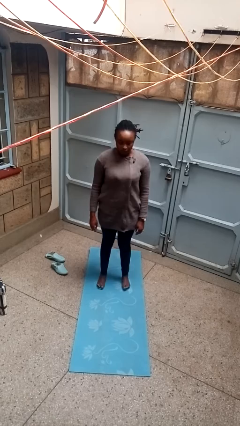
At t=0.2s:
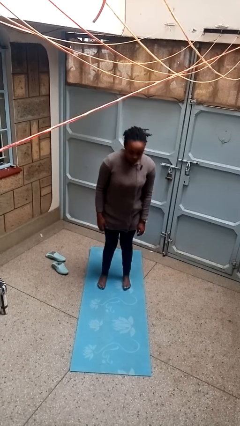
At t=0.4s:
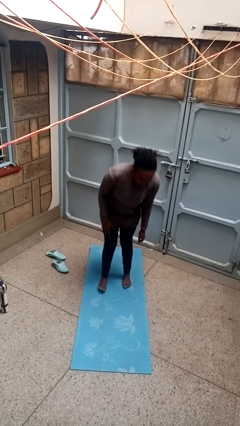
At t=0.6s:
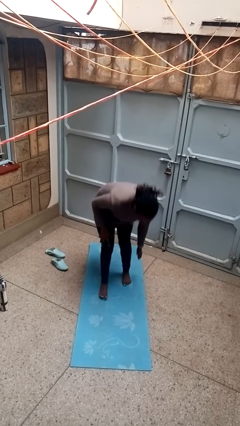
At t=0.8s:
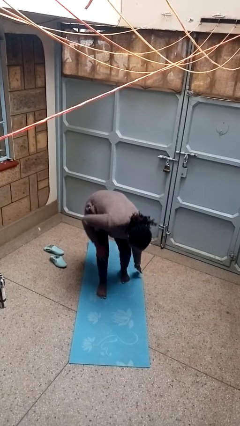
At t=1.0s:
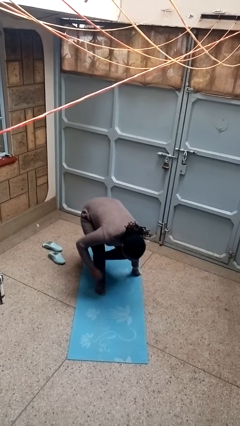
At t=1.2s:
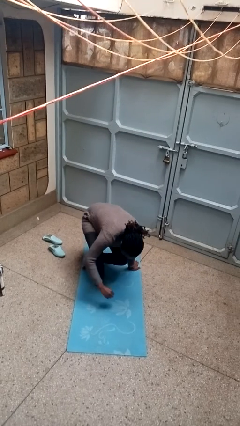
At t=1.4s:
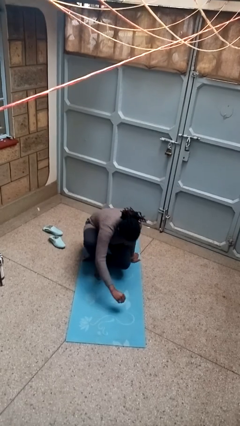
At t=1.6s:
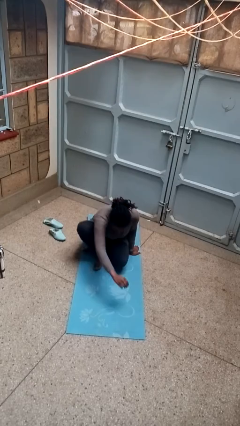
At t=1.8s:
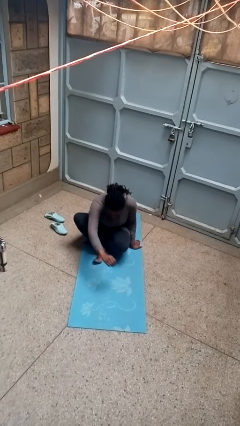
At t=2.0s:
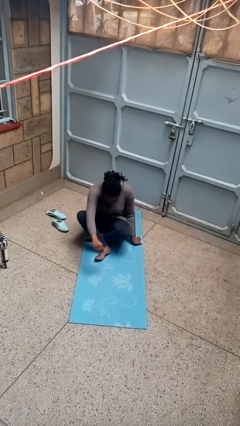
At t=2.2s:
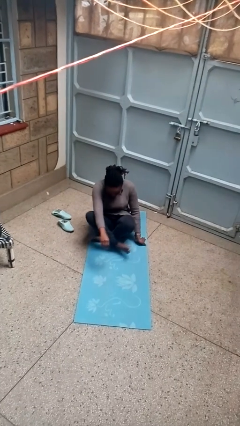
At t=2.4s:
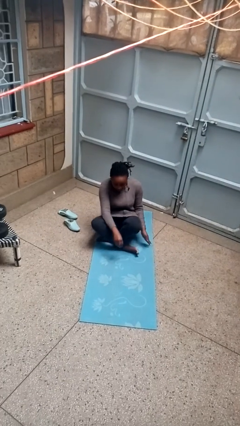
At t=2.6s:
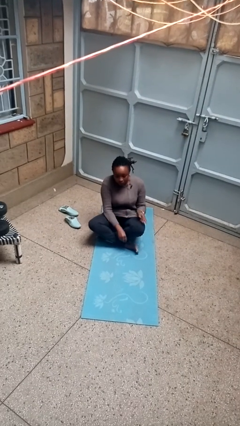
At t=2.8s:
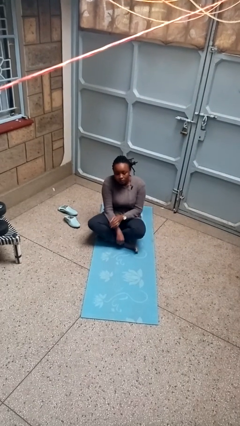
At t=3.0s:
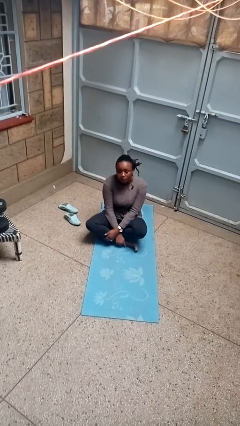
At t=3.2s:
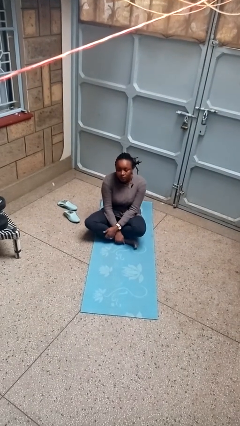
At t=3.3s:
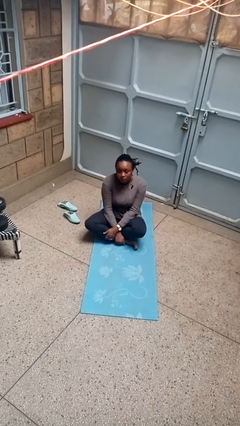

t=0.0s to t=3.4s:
person sits crisscross

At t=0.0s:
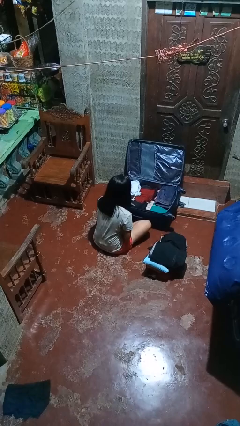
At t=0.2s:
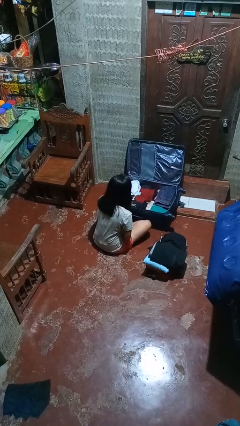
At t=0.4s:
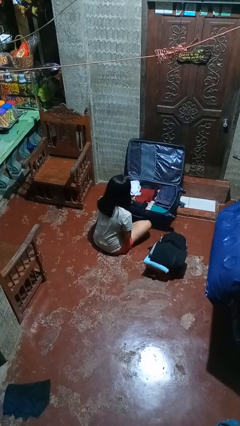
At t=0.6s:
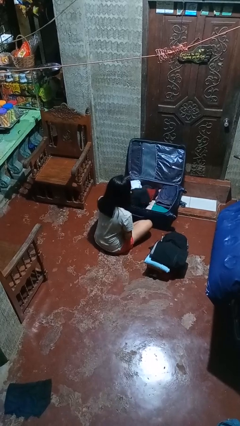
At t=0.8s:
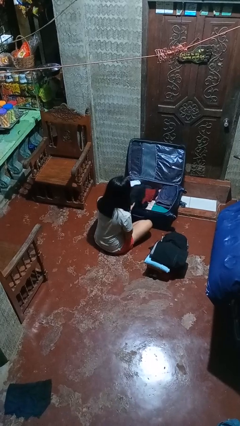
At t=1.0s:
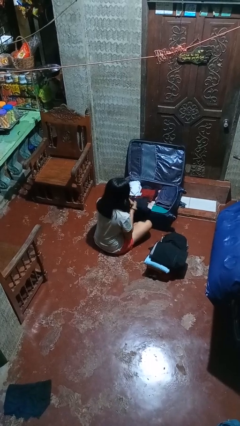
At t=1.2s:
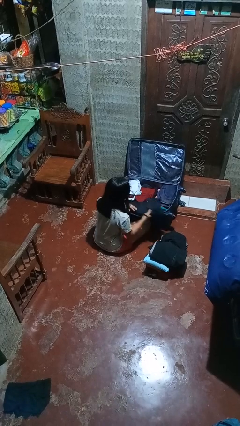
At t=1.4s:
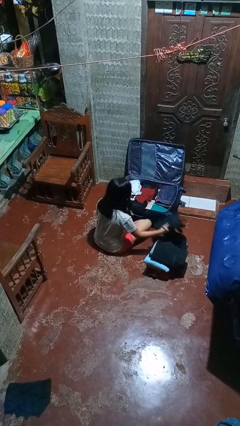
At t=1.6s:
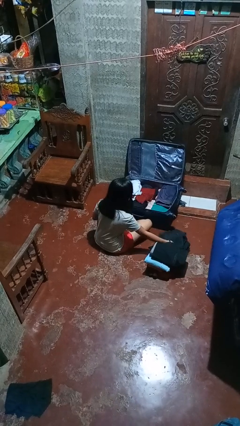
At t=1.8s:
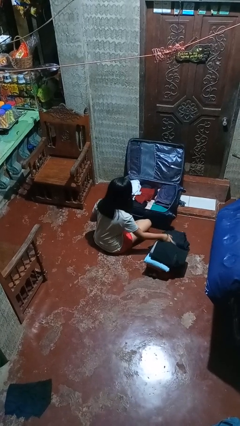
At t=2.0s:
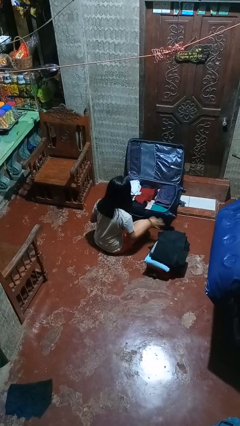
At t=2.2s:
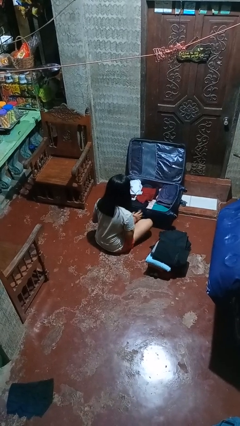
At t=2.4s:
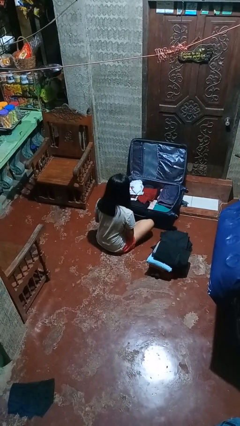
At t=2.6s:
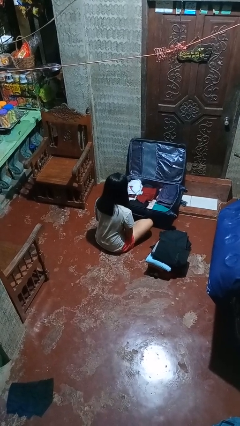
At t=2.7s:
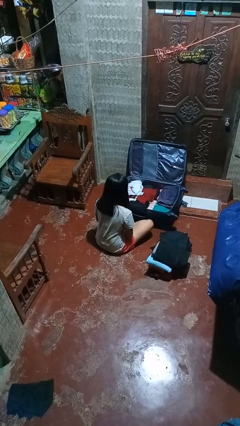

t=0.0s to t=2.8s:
person unloads clothes from suitcase

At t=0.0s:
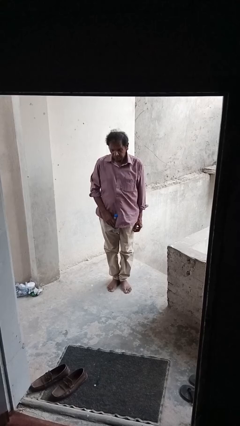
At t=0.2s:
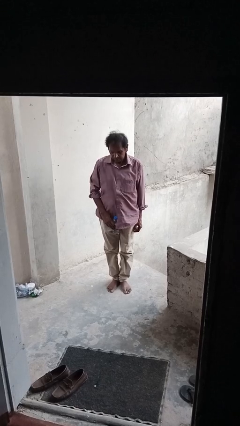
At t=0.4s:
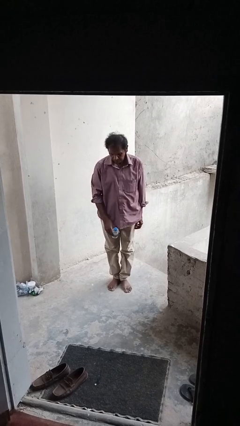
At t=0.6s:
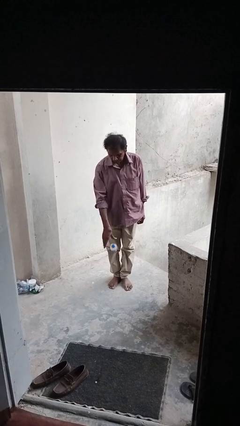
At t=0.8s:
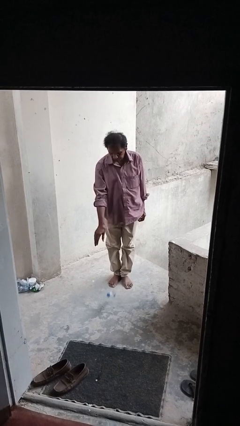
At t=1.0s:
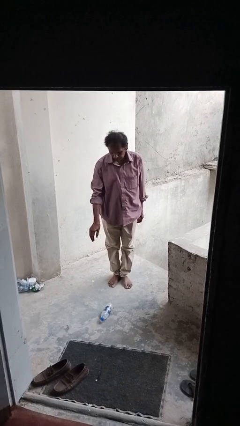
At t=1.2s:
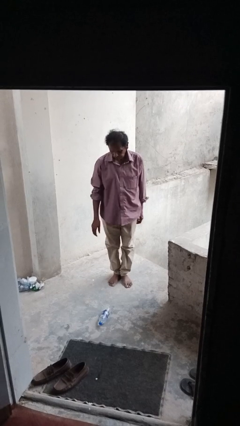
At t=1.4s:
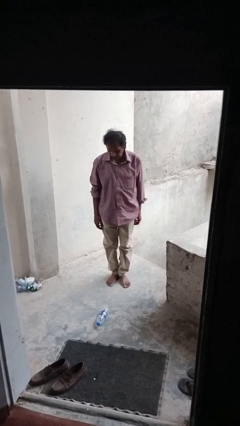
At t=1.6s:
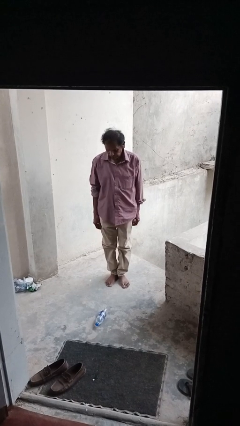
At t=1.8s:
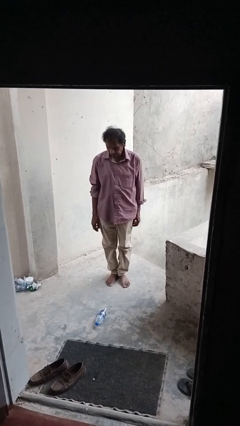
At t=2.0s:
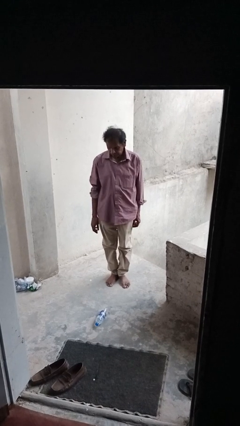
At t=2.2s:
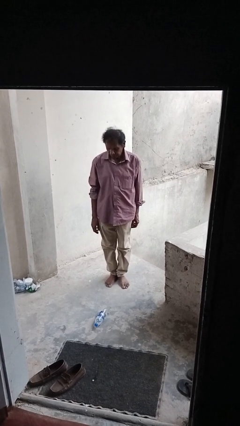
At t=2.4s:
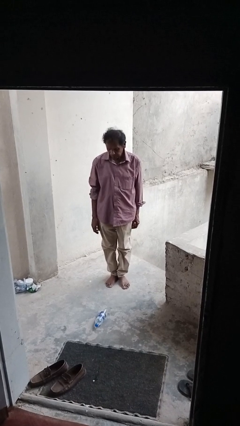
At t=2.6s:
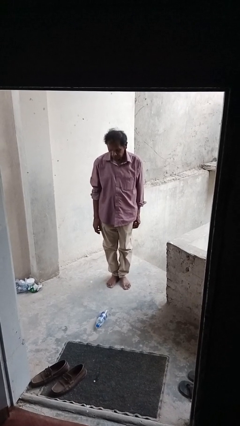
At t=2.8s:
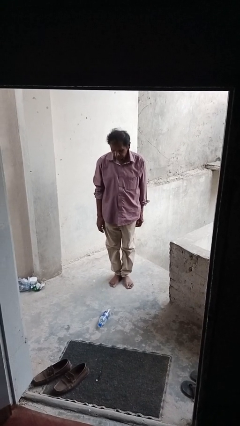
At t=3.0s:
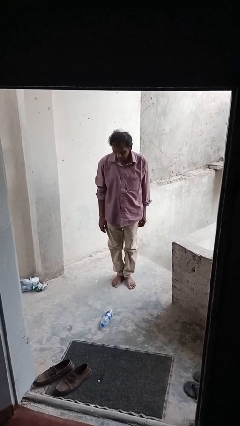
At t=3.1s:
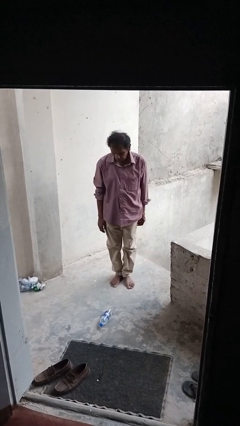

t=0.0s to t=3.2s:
person throws object to ground

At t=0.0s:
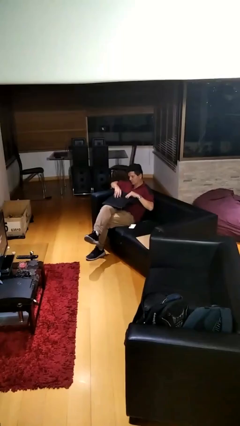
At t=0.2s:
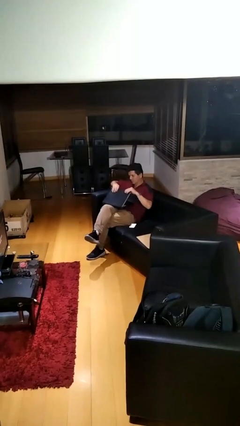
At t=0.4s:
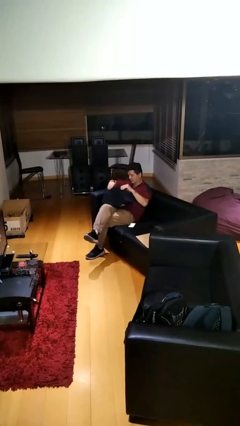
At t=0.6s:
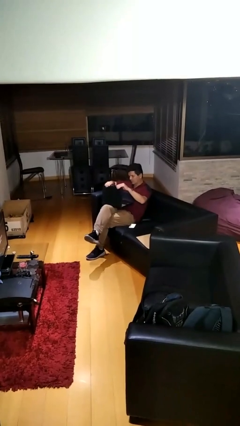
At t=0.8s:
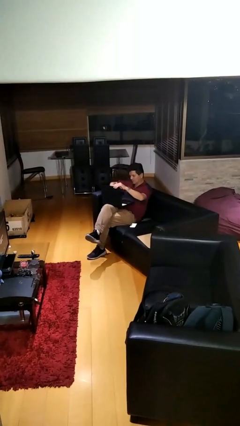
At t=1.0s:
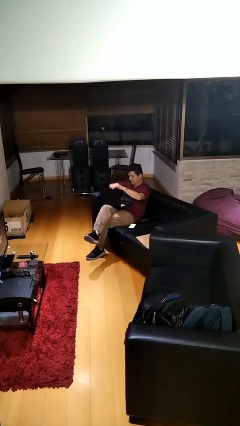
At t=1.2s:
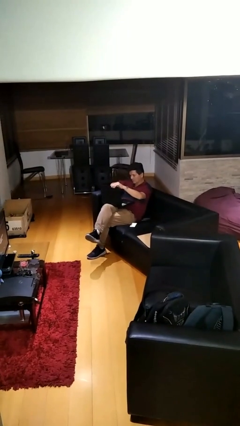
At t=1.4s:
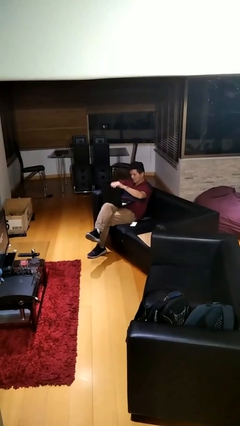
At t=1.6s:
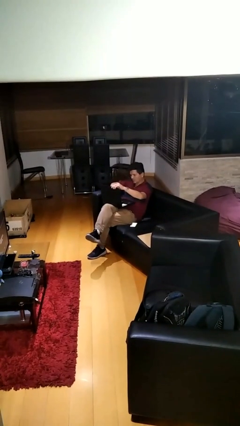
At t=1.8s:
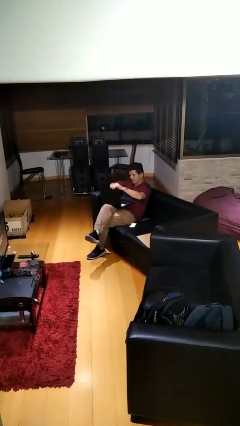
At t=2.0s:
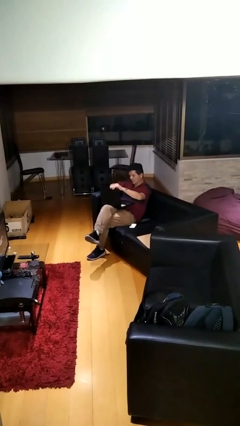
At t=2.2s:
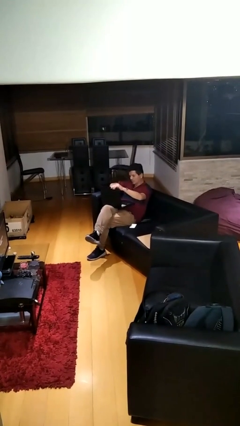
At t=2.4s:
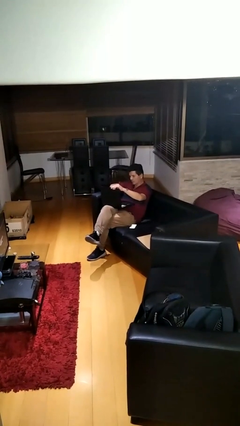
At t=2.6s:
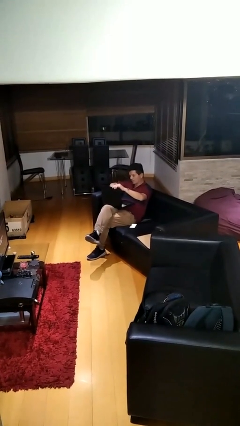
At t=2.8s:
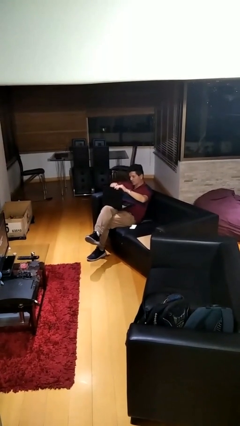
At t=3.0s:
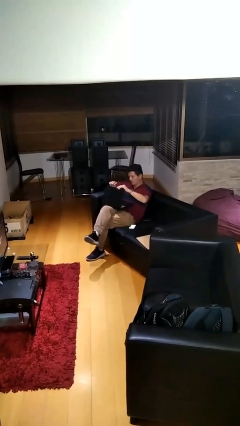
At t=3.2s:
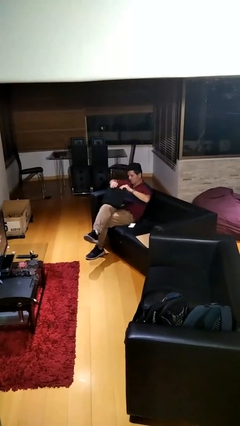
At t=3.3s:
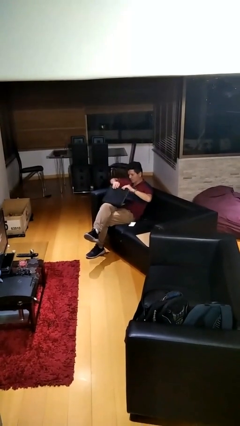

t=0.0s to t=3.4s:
person interacts with laptop

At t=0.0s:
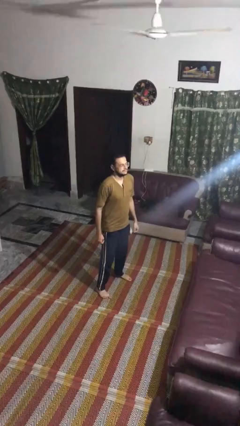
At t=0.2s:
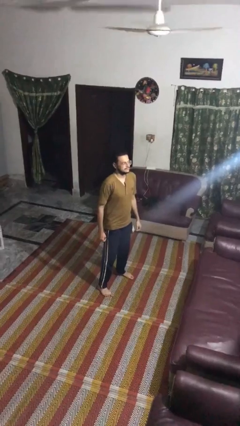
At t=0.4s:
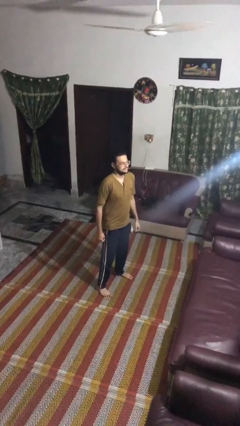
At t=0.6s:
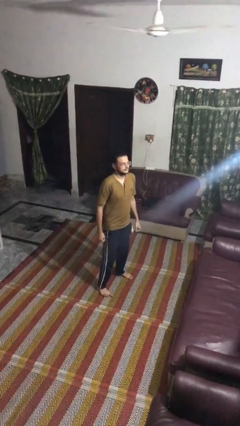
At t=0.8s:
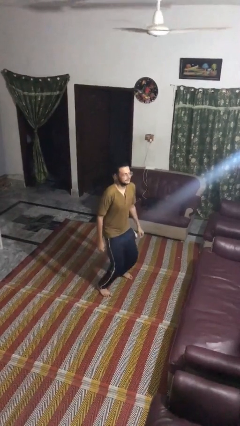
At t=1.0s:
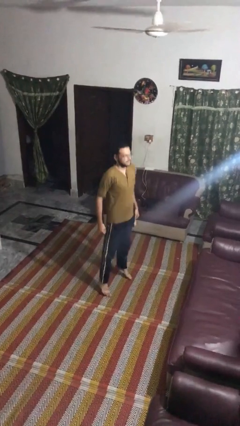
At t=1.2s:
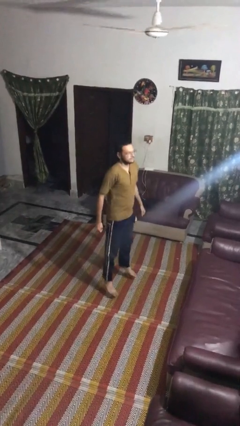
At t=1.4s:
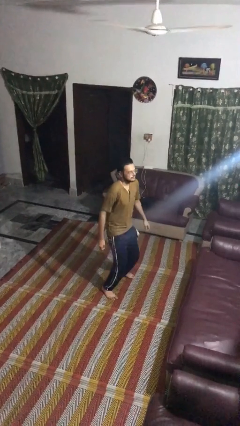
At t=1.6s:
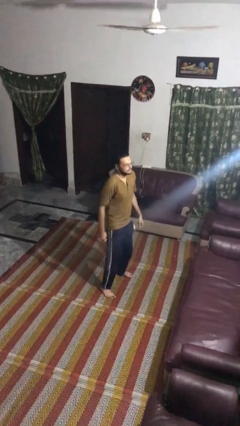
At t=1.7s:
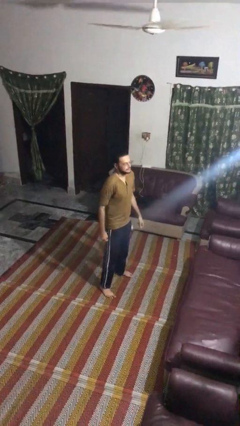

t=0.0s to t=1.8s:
person jumps

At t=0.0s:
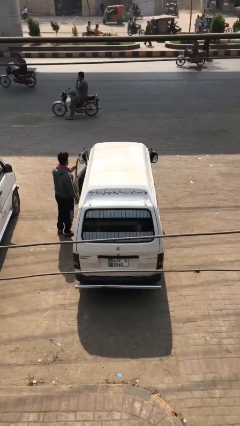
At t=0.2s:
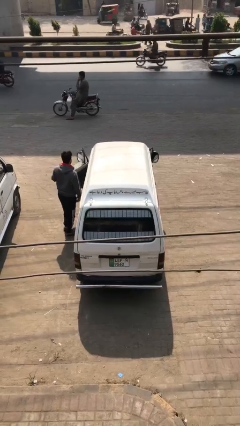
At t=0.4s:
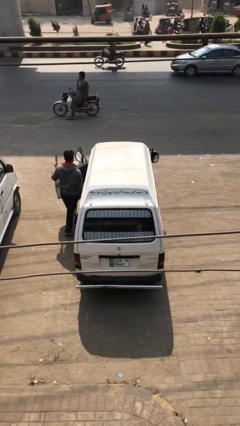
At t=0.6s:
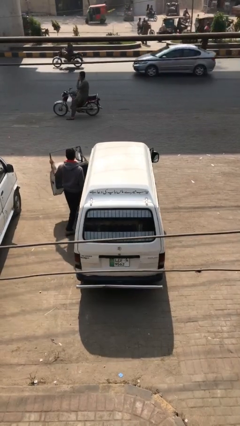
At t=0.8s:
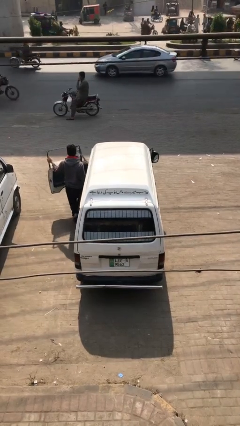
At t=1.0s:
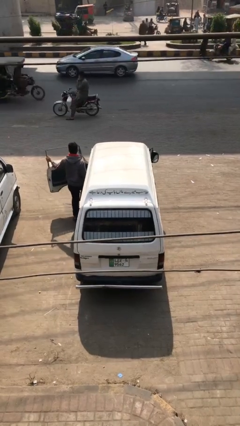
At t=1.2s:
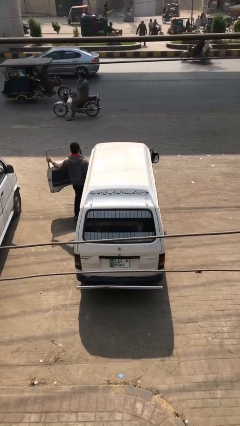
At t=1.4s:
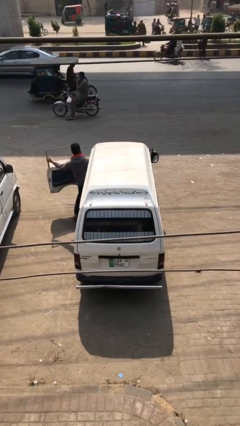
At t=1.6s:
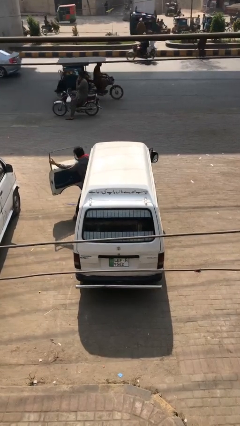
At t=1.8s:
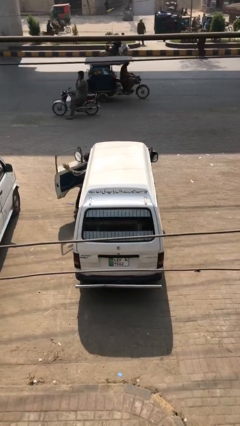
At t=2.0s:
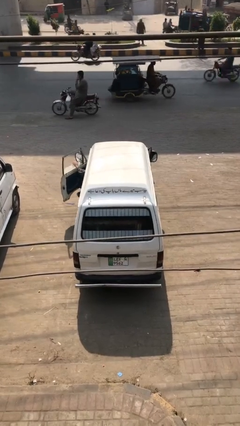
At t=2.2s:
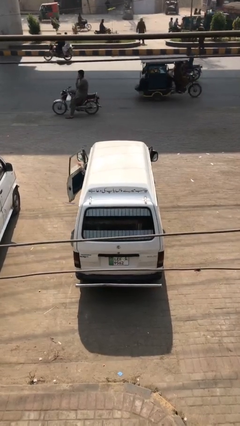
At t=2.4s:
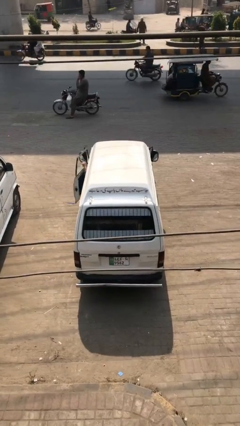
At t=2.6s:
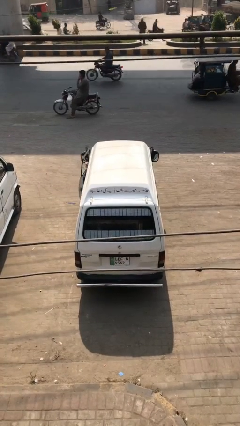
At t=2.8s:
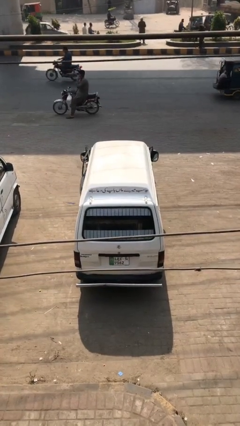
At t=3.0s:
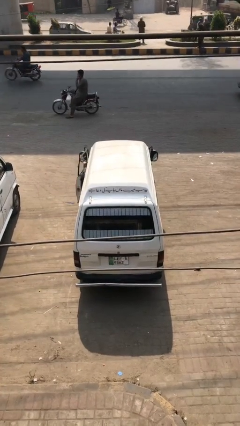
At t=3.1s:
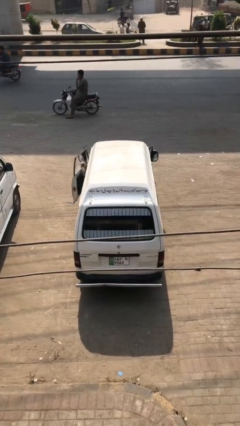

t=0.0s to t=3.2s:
car picks up person
